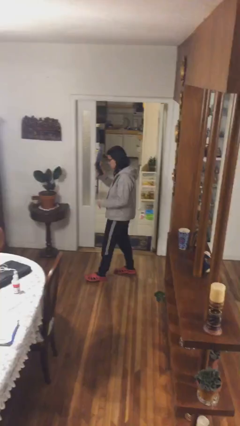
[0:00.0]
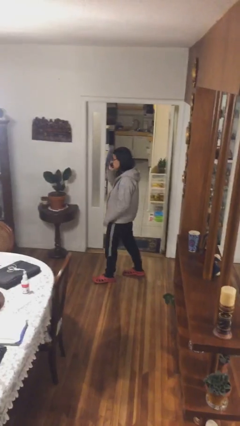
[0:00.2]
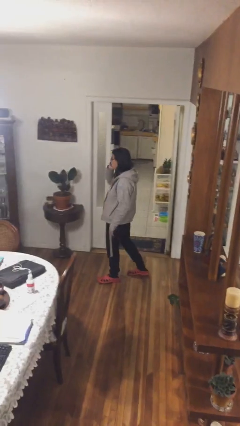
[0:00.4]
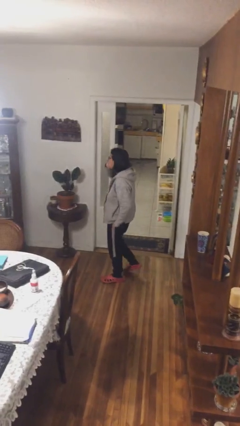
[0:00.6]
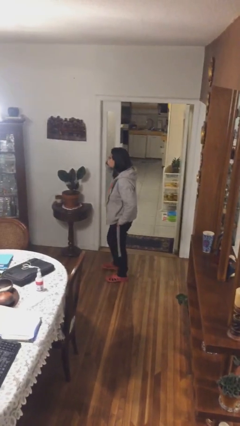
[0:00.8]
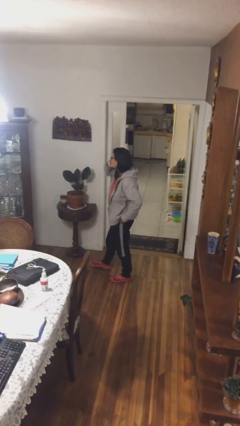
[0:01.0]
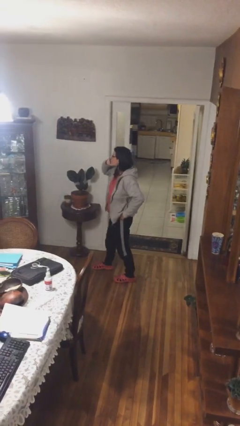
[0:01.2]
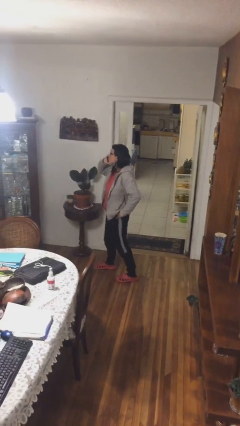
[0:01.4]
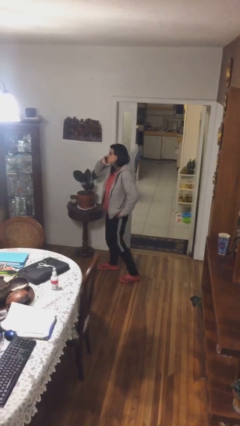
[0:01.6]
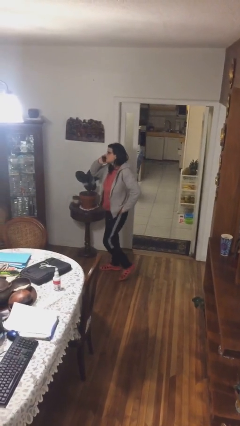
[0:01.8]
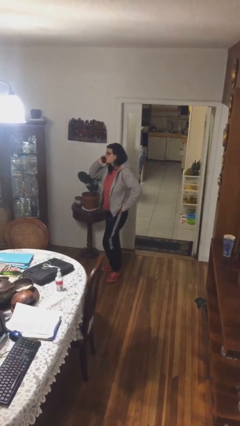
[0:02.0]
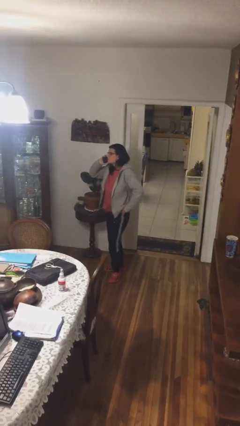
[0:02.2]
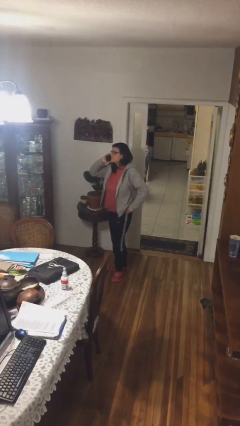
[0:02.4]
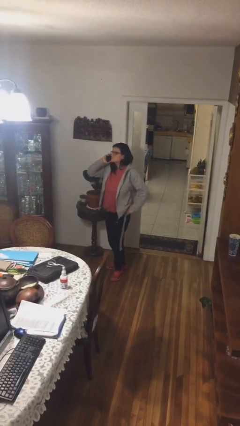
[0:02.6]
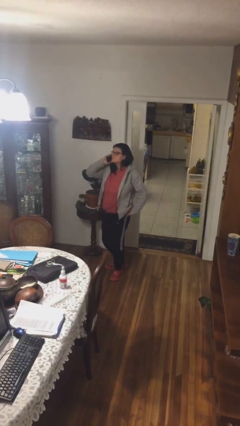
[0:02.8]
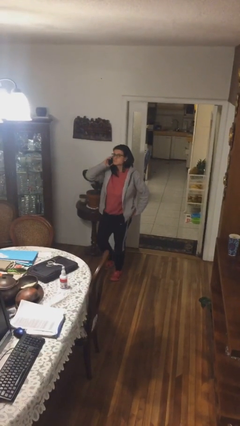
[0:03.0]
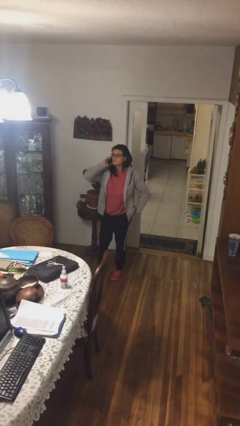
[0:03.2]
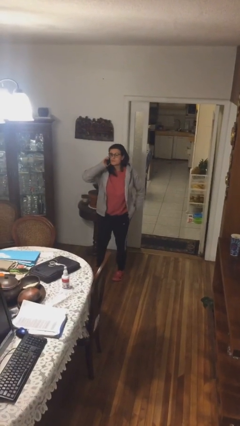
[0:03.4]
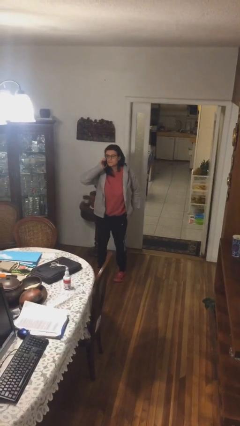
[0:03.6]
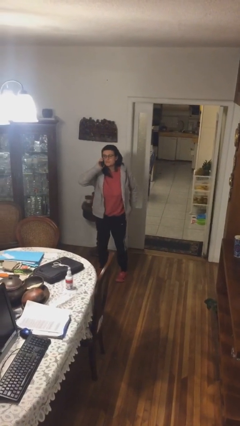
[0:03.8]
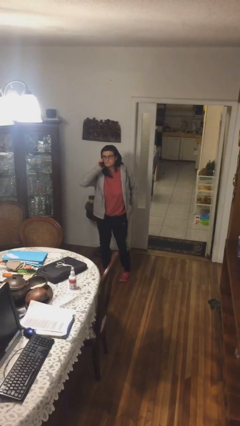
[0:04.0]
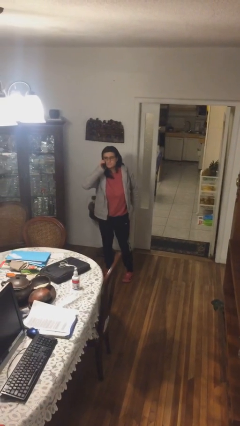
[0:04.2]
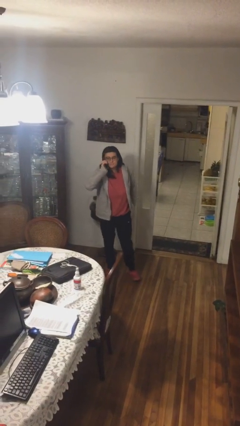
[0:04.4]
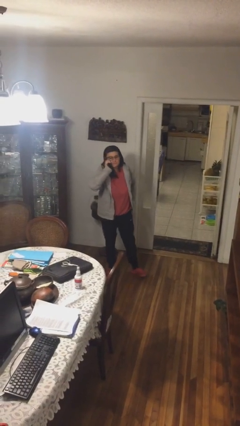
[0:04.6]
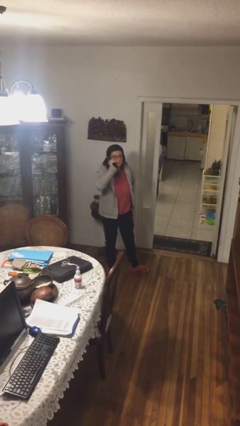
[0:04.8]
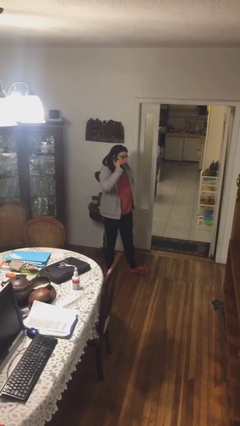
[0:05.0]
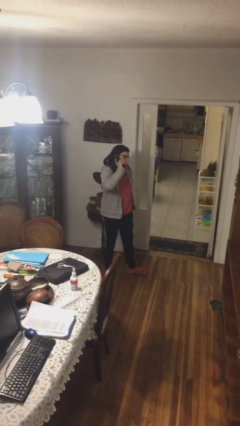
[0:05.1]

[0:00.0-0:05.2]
person talks on phone

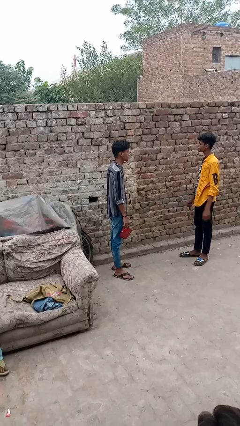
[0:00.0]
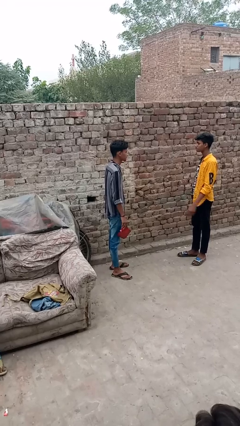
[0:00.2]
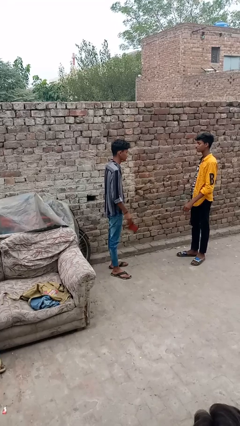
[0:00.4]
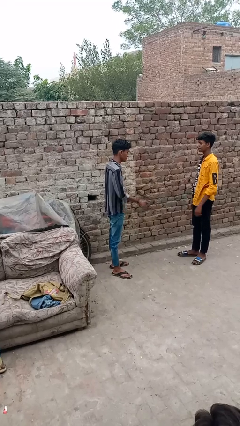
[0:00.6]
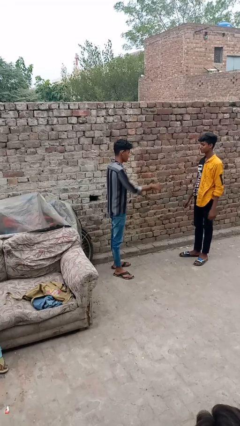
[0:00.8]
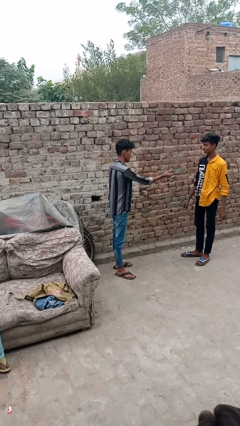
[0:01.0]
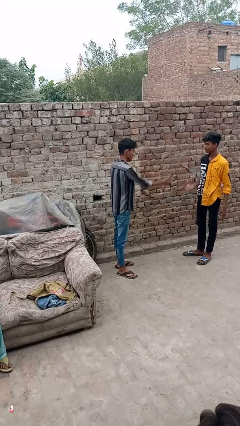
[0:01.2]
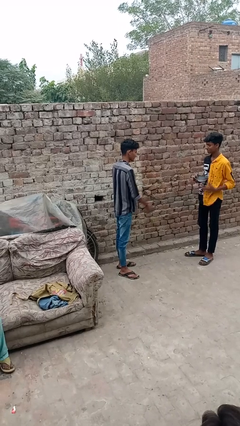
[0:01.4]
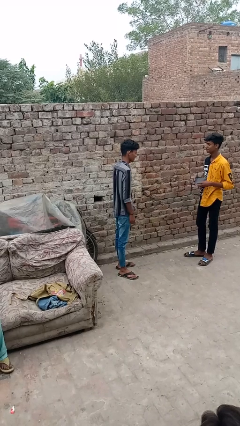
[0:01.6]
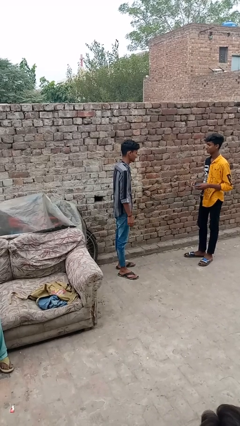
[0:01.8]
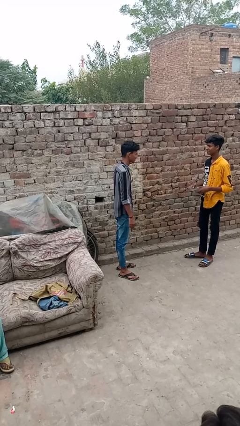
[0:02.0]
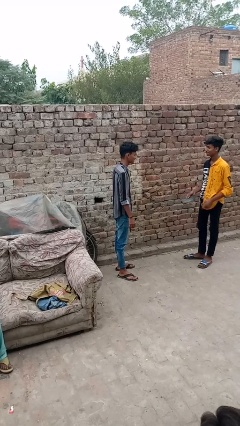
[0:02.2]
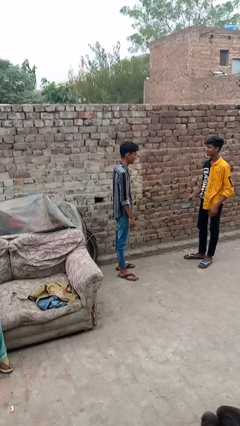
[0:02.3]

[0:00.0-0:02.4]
person throws object to person

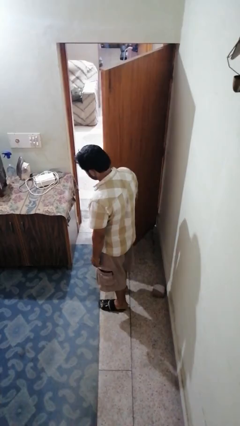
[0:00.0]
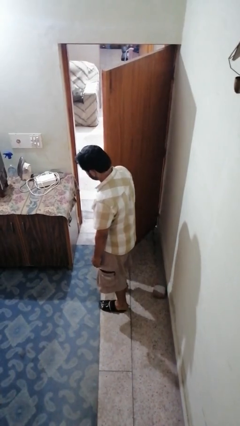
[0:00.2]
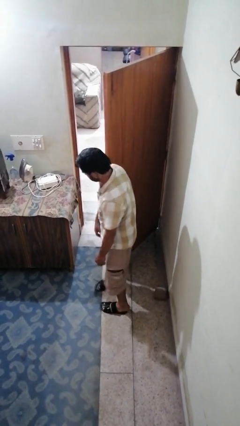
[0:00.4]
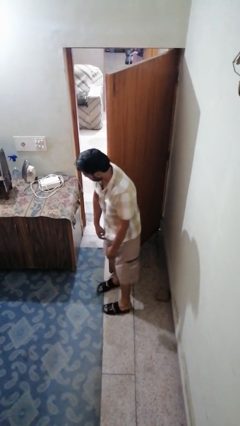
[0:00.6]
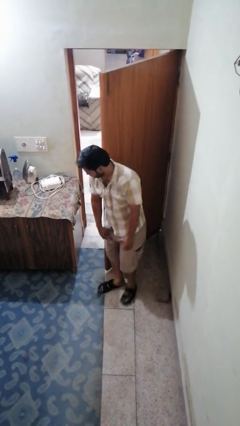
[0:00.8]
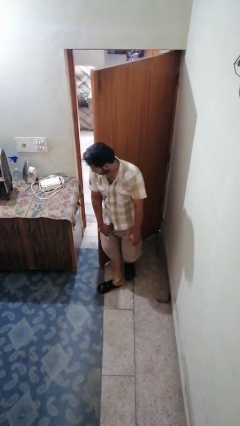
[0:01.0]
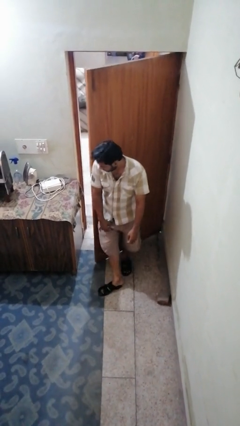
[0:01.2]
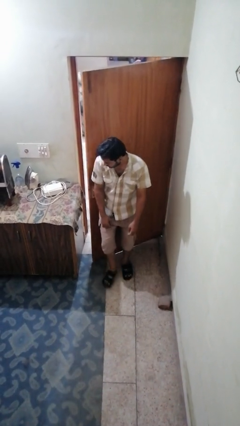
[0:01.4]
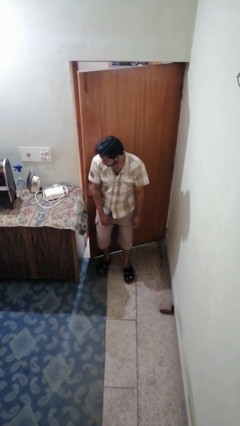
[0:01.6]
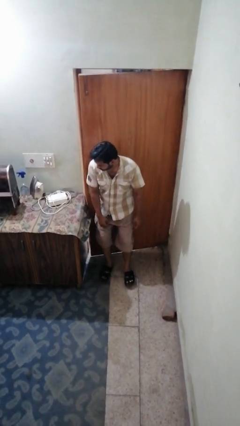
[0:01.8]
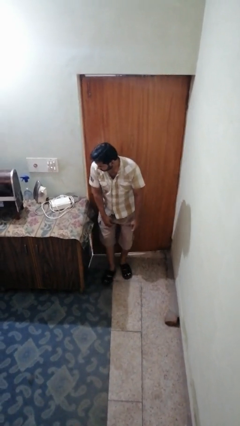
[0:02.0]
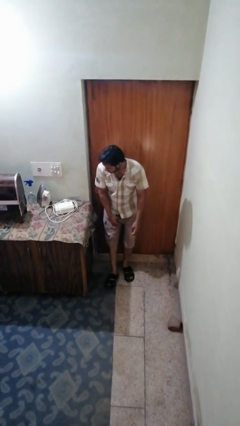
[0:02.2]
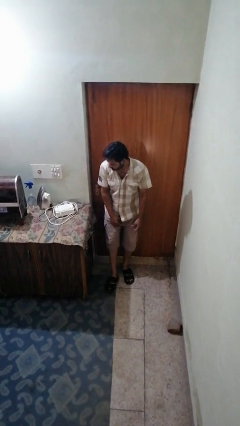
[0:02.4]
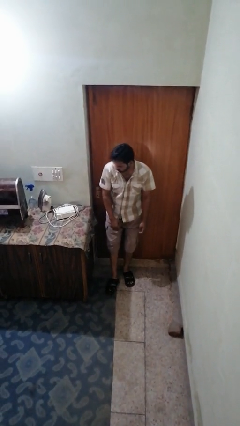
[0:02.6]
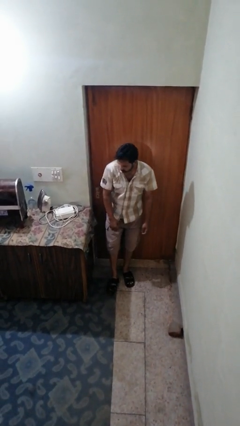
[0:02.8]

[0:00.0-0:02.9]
person closes door with hip

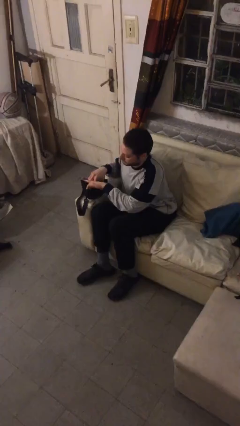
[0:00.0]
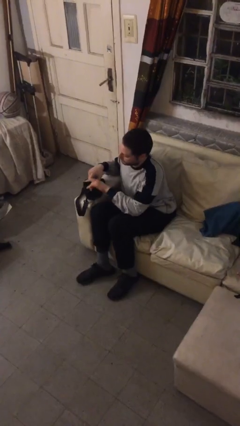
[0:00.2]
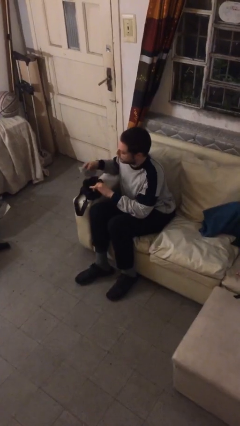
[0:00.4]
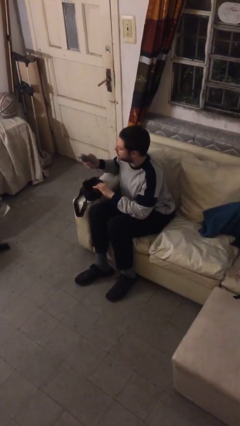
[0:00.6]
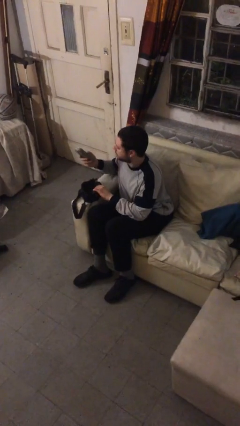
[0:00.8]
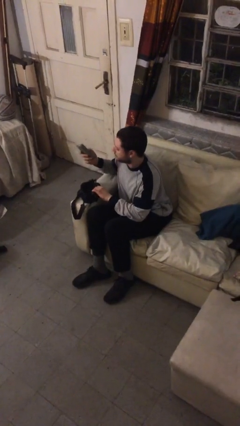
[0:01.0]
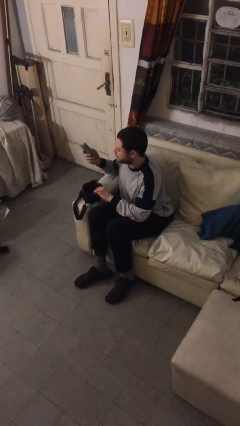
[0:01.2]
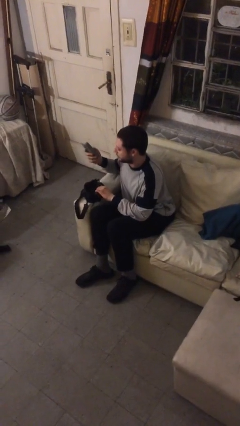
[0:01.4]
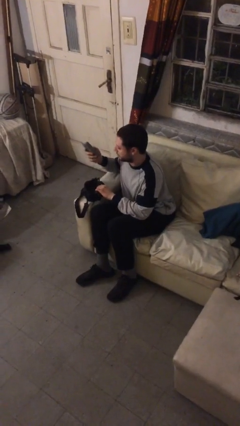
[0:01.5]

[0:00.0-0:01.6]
person takes object from purse

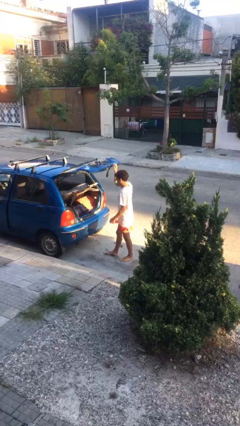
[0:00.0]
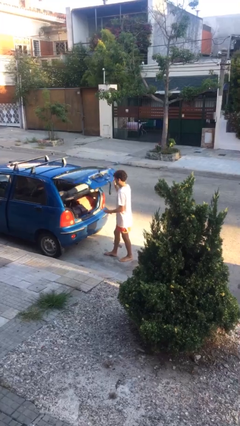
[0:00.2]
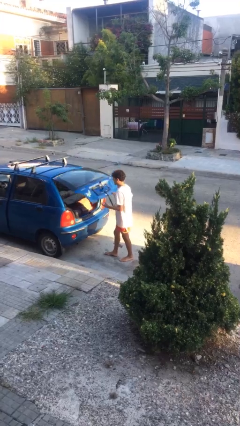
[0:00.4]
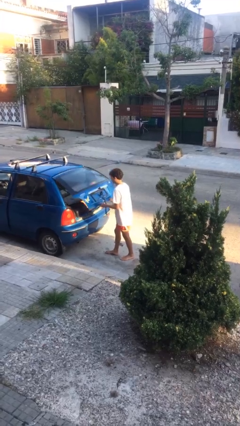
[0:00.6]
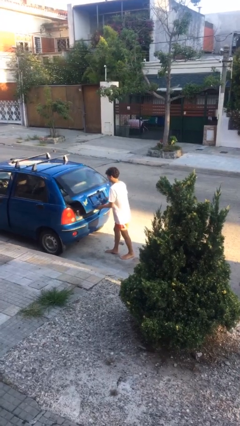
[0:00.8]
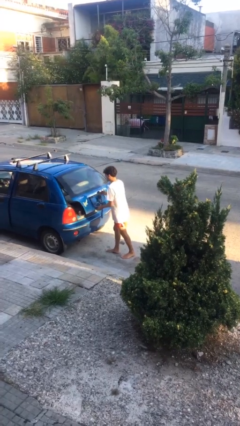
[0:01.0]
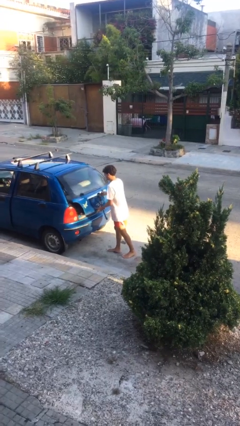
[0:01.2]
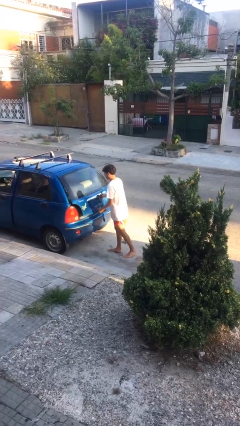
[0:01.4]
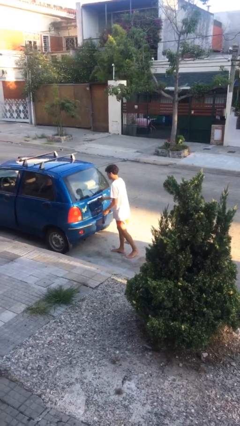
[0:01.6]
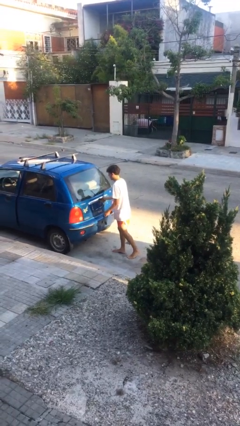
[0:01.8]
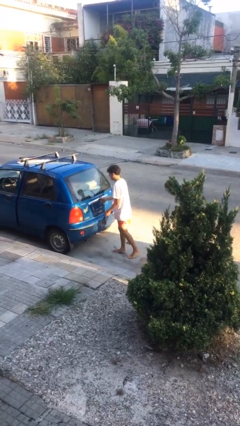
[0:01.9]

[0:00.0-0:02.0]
person closes car trunk

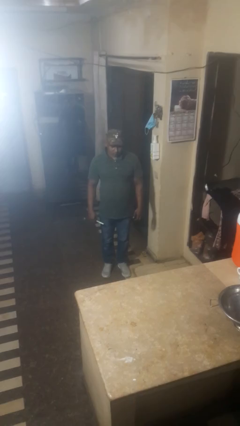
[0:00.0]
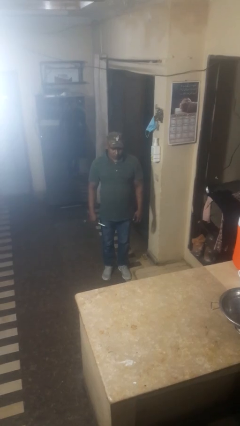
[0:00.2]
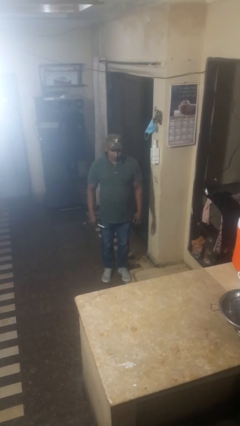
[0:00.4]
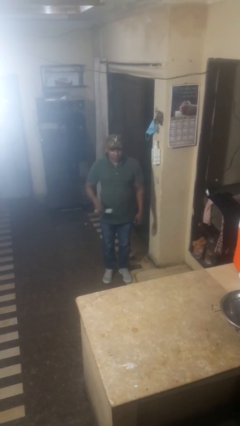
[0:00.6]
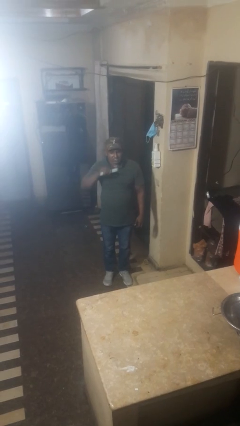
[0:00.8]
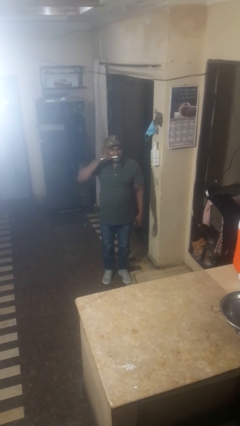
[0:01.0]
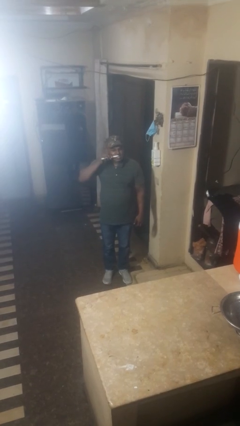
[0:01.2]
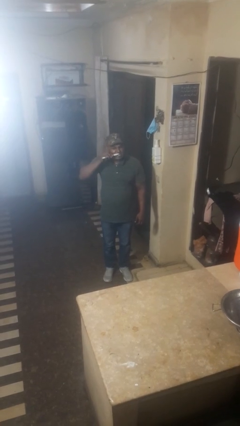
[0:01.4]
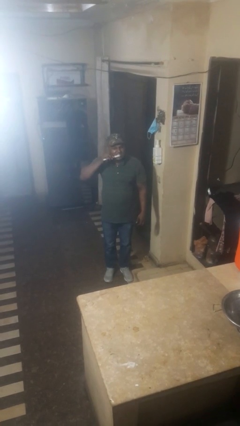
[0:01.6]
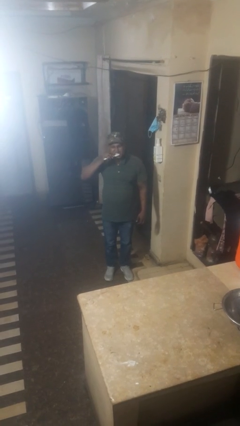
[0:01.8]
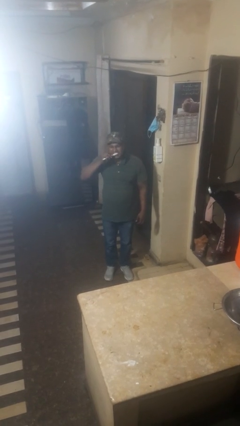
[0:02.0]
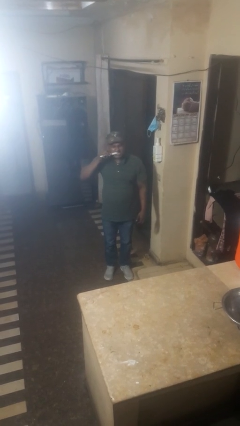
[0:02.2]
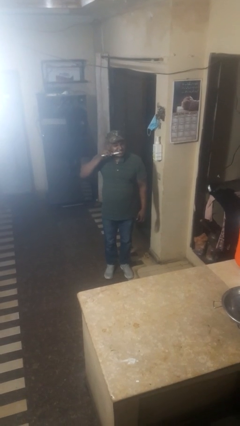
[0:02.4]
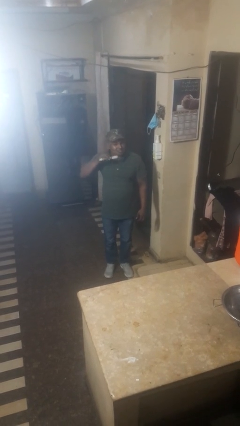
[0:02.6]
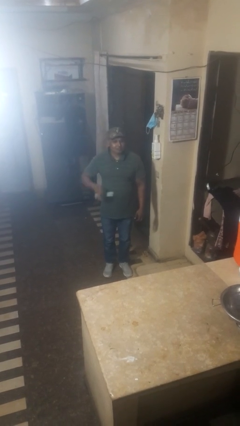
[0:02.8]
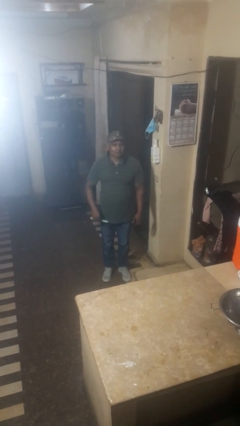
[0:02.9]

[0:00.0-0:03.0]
person brushes teeth

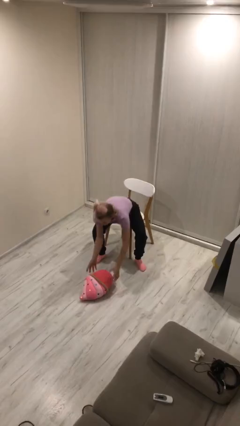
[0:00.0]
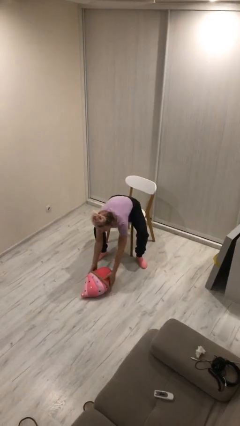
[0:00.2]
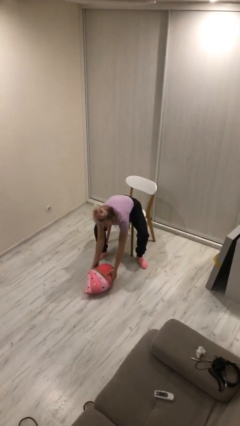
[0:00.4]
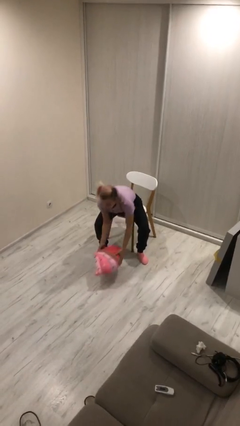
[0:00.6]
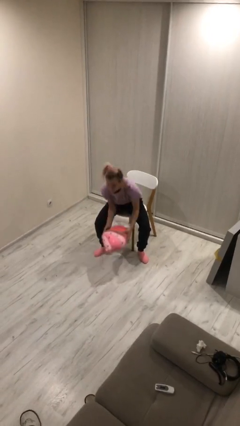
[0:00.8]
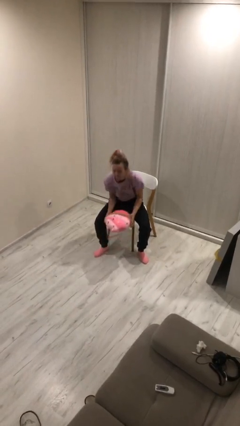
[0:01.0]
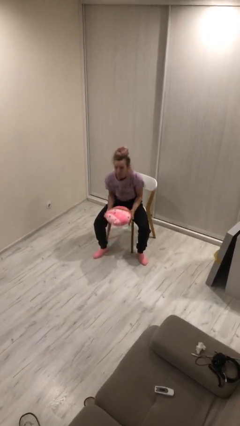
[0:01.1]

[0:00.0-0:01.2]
person picks up object from floor
